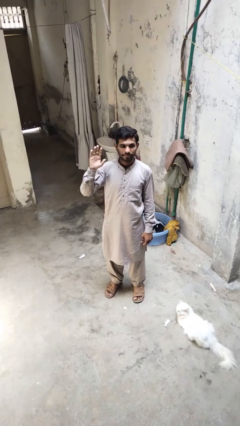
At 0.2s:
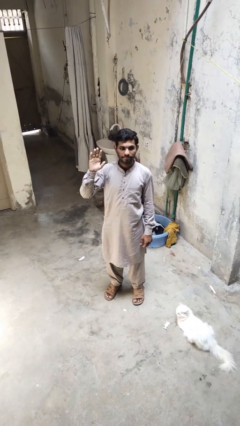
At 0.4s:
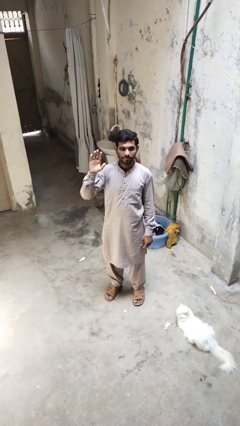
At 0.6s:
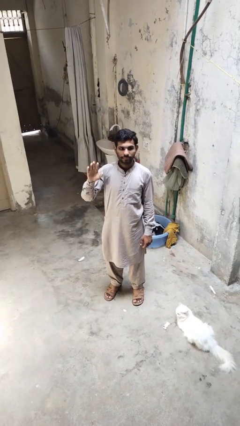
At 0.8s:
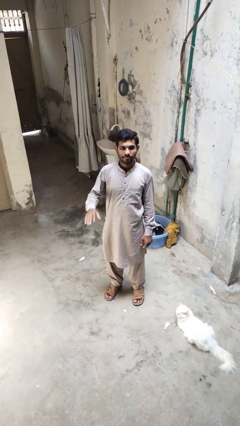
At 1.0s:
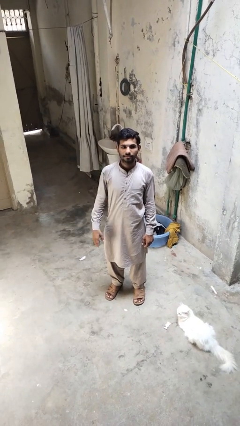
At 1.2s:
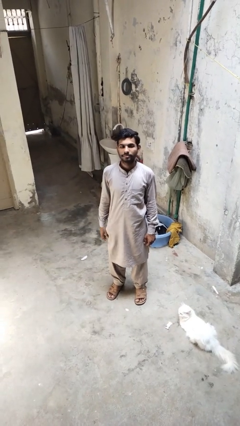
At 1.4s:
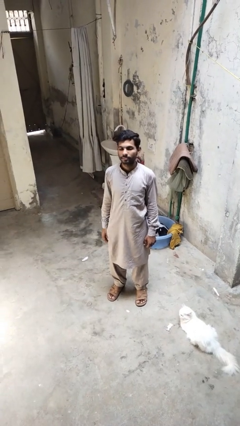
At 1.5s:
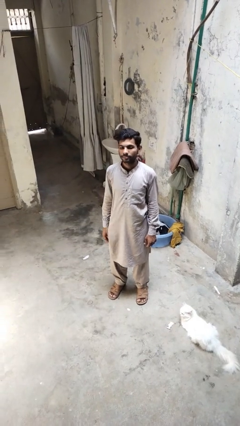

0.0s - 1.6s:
person gestures lower hand

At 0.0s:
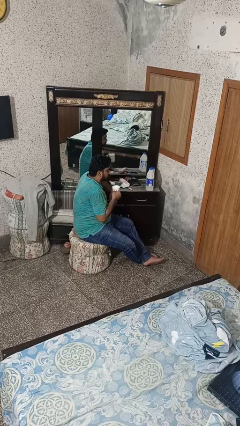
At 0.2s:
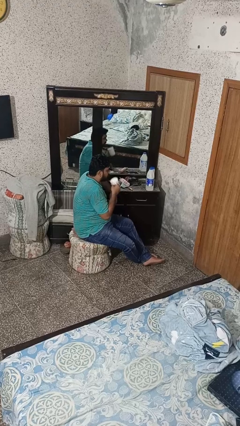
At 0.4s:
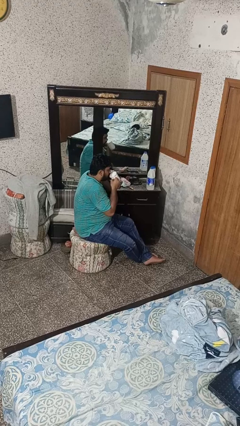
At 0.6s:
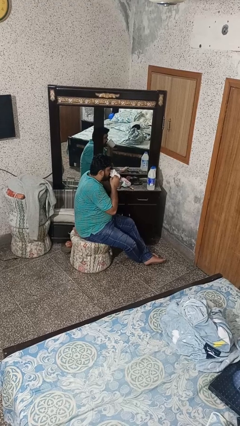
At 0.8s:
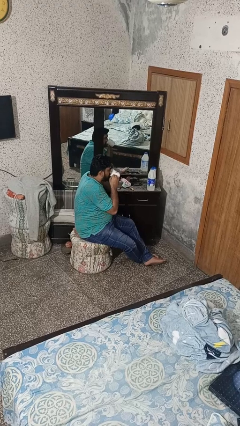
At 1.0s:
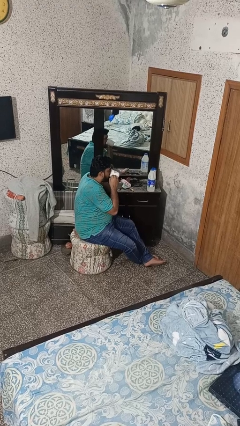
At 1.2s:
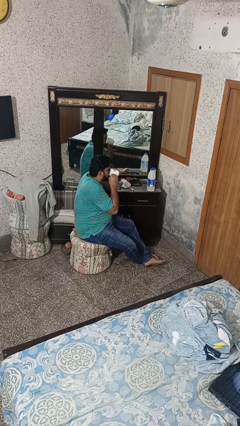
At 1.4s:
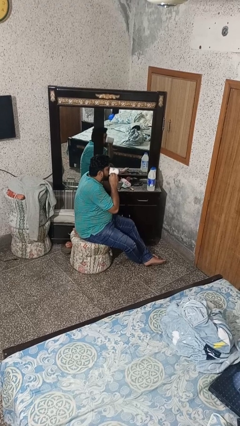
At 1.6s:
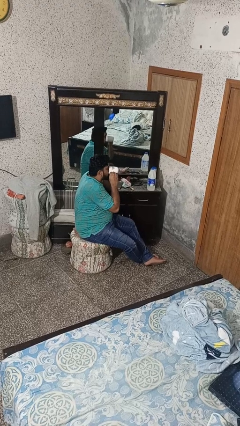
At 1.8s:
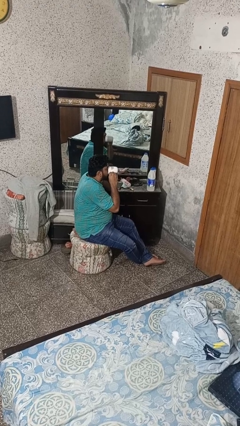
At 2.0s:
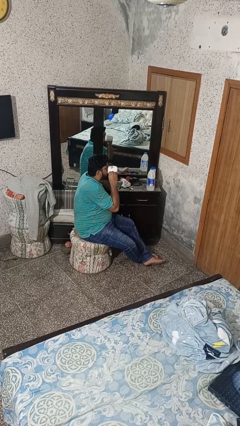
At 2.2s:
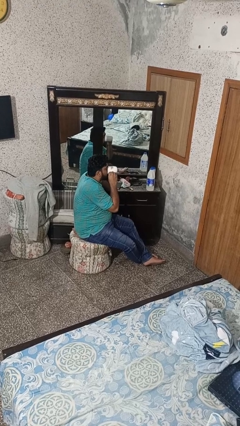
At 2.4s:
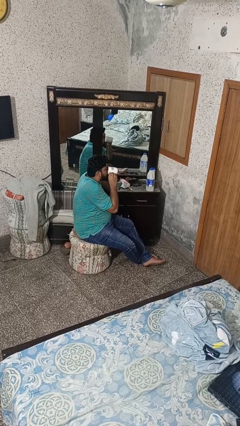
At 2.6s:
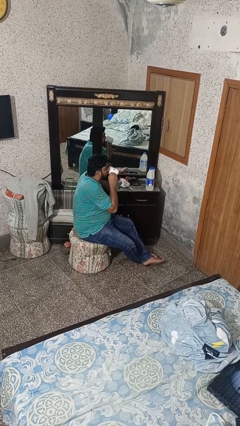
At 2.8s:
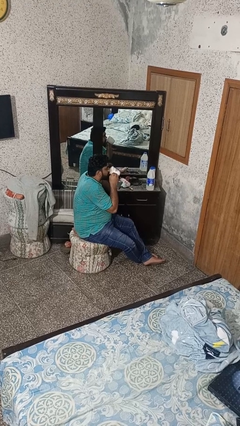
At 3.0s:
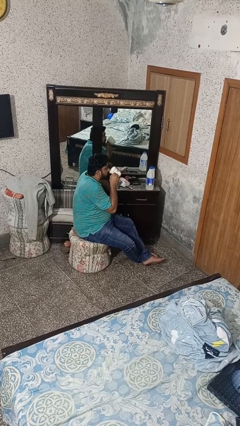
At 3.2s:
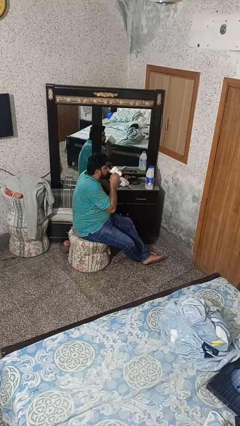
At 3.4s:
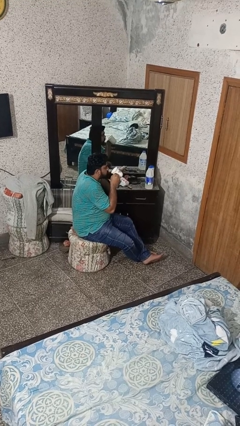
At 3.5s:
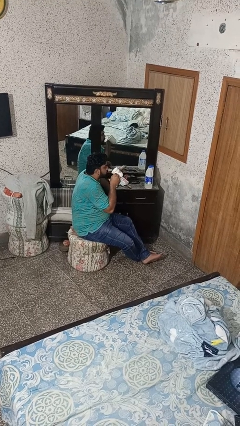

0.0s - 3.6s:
person drinks from mug

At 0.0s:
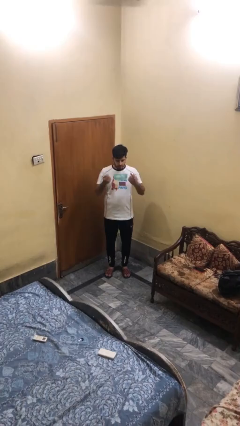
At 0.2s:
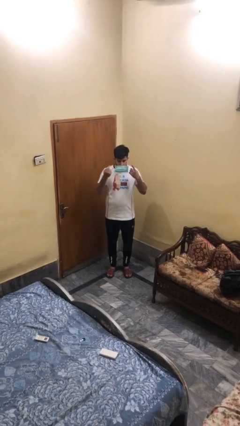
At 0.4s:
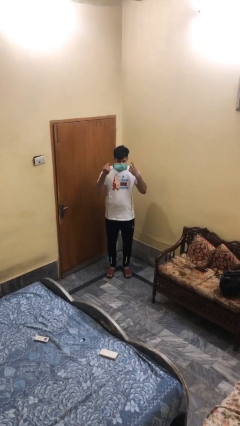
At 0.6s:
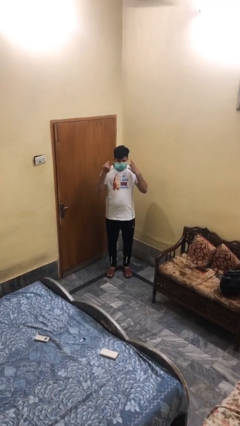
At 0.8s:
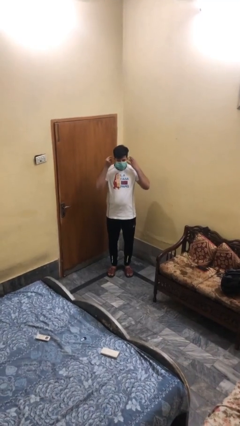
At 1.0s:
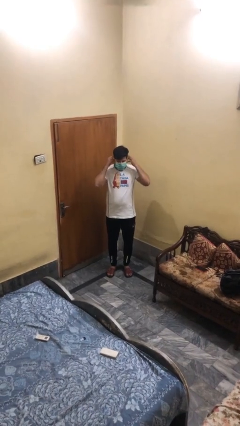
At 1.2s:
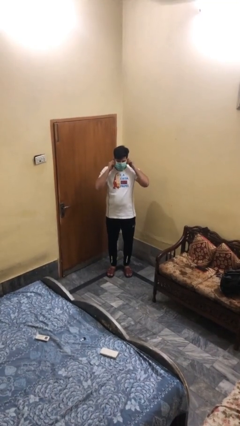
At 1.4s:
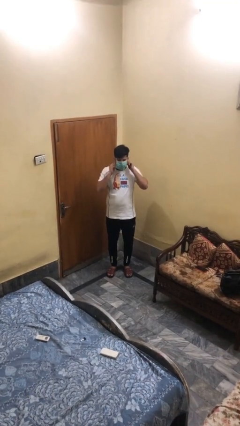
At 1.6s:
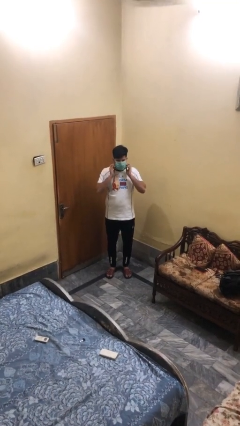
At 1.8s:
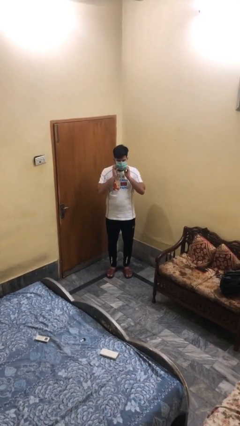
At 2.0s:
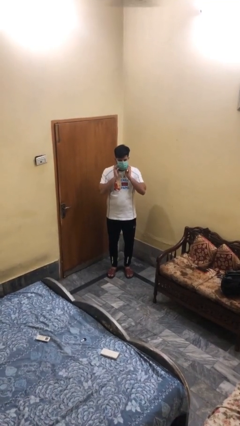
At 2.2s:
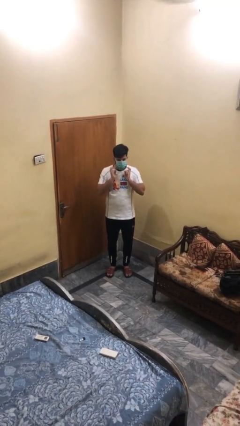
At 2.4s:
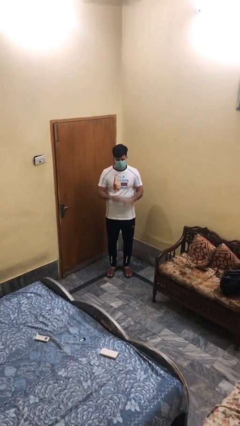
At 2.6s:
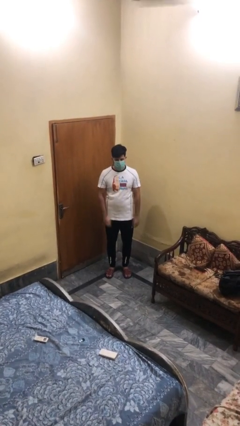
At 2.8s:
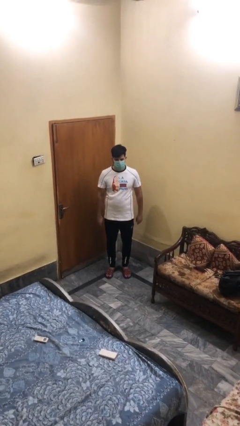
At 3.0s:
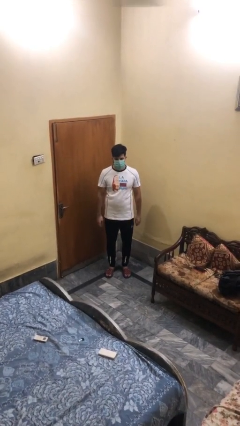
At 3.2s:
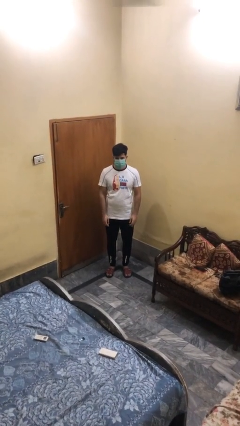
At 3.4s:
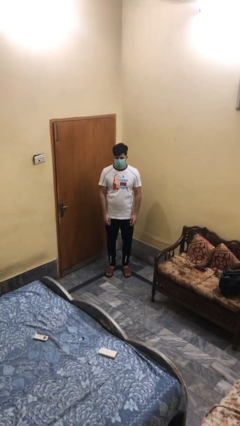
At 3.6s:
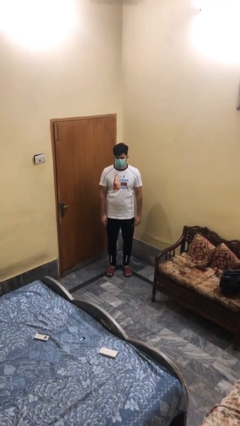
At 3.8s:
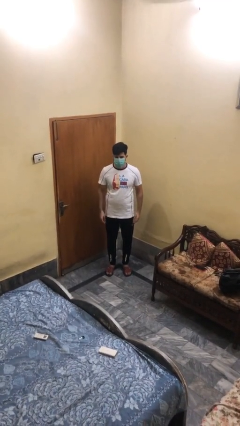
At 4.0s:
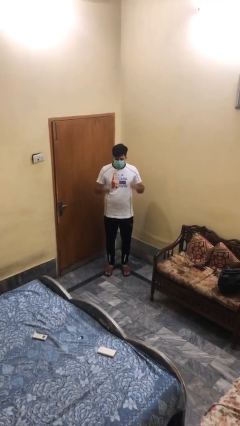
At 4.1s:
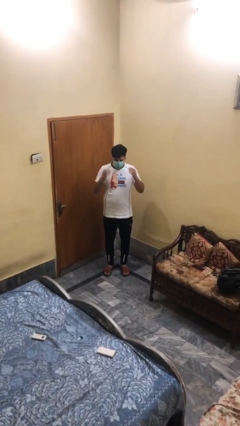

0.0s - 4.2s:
person puts on facemask

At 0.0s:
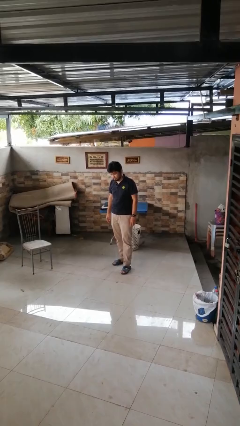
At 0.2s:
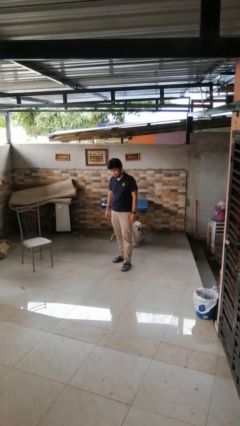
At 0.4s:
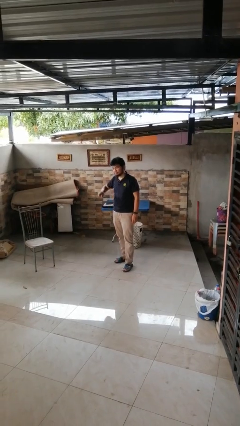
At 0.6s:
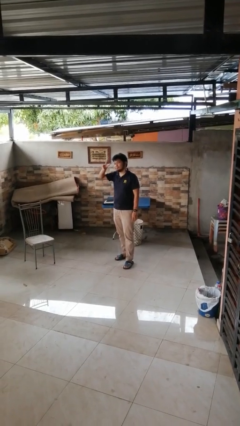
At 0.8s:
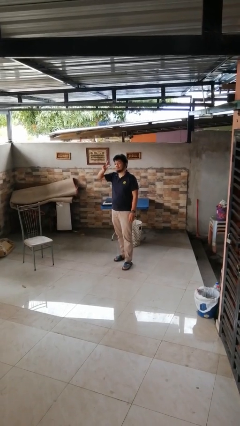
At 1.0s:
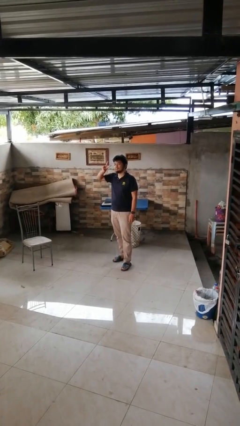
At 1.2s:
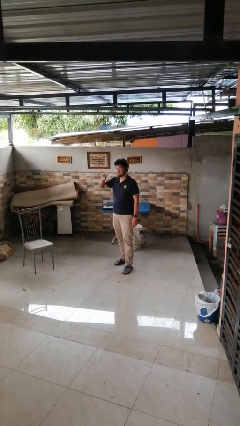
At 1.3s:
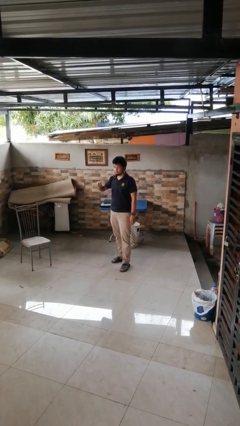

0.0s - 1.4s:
person gestures peace

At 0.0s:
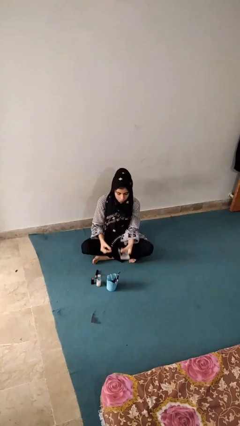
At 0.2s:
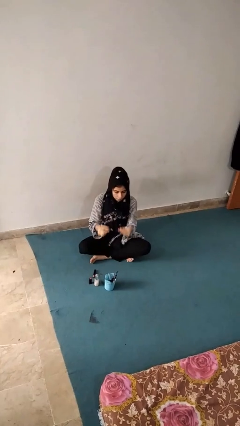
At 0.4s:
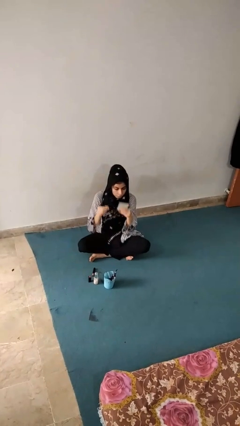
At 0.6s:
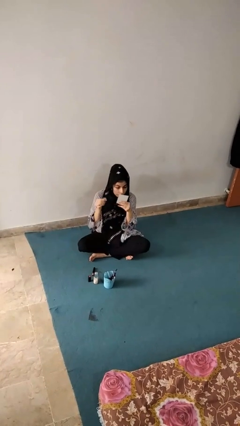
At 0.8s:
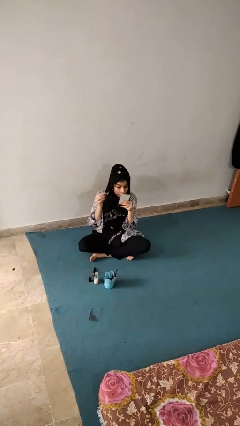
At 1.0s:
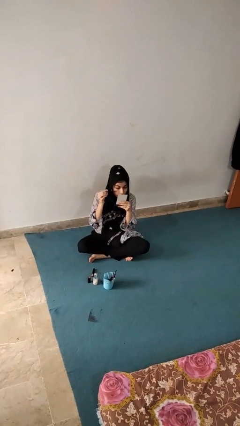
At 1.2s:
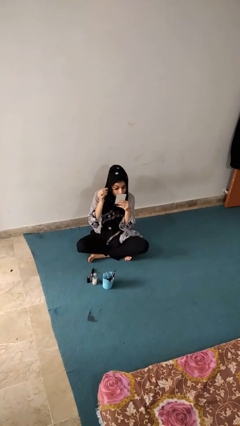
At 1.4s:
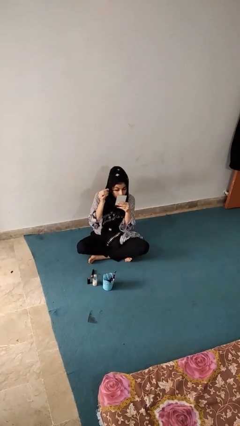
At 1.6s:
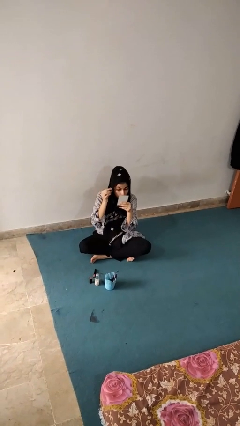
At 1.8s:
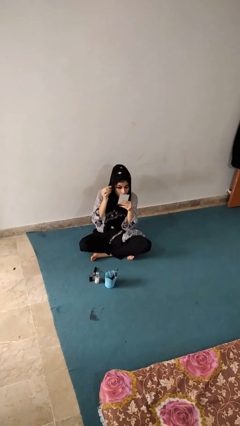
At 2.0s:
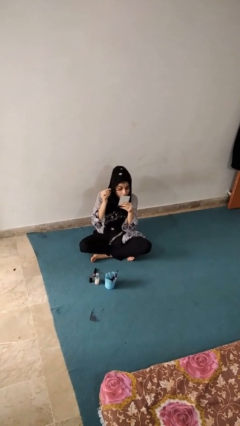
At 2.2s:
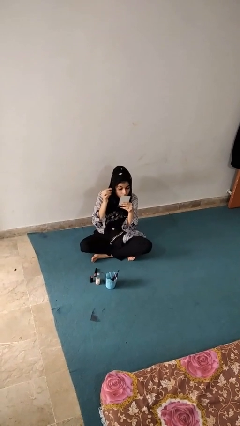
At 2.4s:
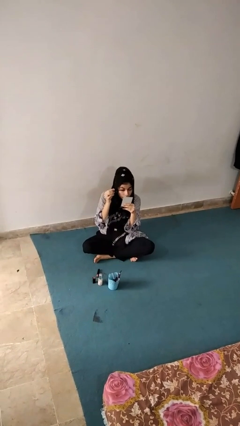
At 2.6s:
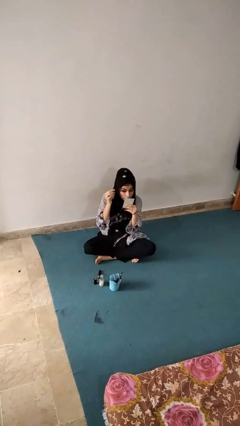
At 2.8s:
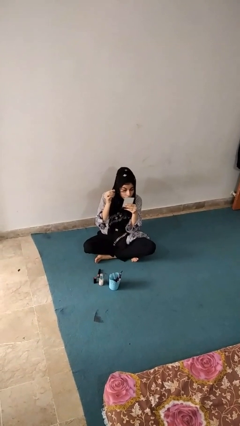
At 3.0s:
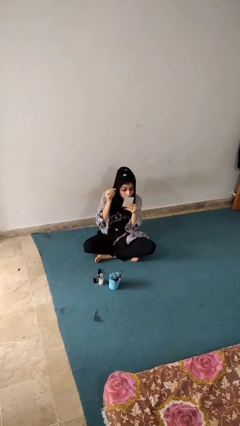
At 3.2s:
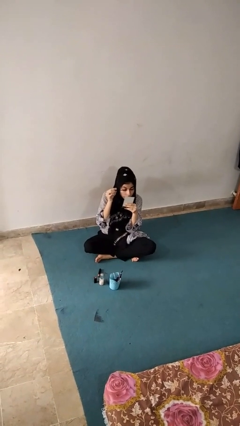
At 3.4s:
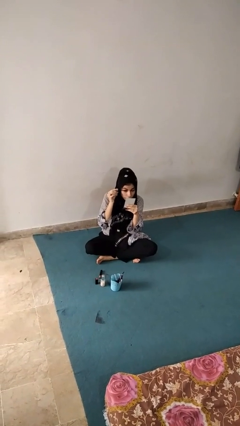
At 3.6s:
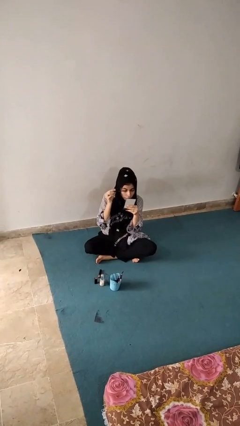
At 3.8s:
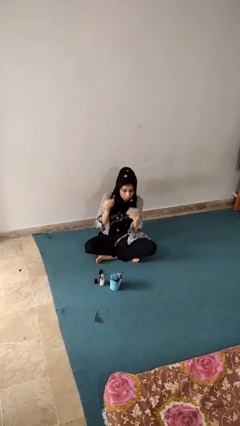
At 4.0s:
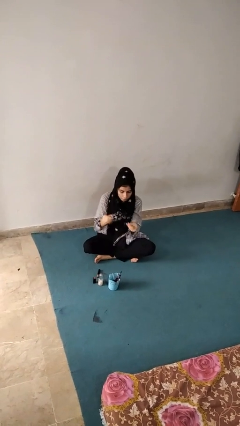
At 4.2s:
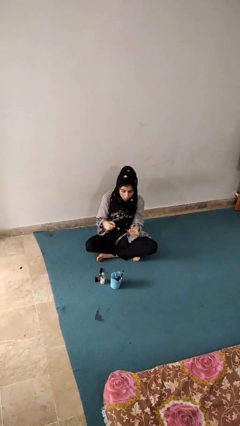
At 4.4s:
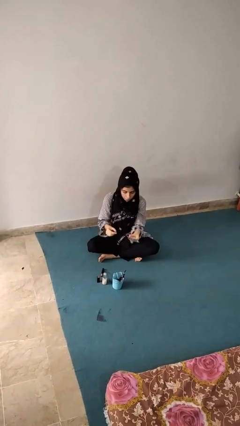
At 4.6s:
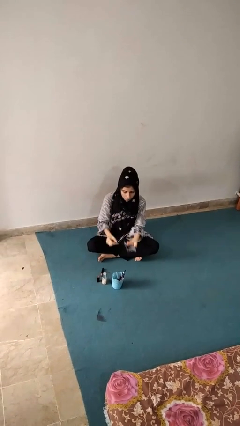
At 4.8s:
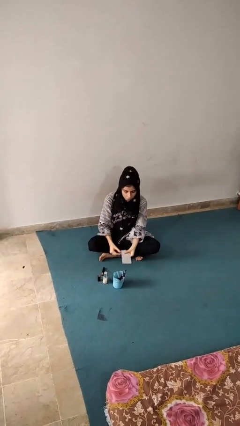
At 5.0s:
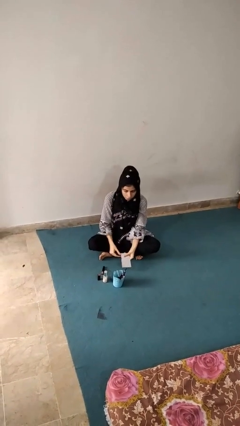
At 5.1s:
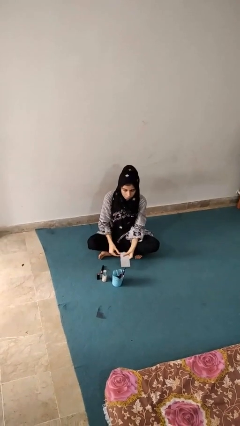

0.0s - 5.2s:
person applies eye makeup

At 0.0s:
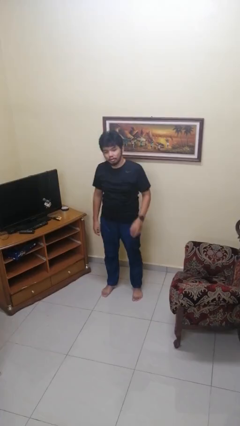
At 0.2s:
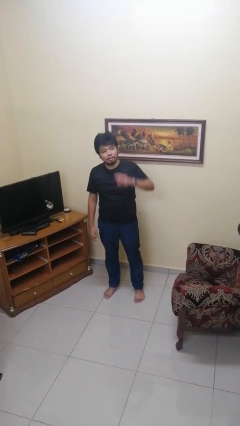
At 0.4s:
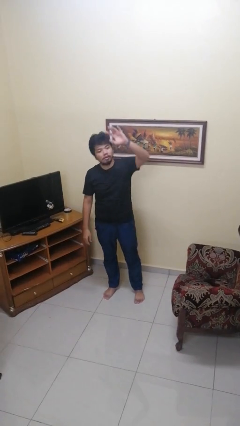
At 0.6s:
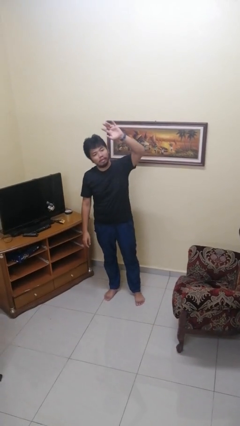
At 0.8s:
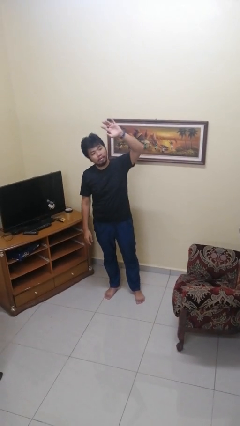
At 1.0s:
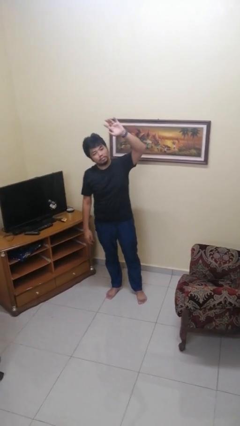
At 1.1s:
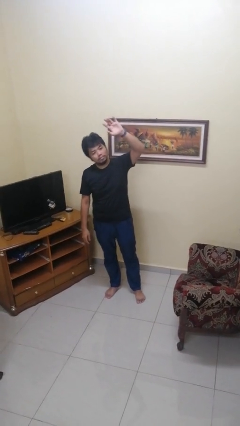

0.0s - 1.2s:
person gestures raise hand

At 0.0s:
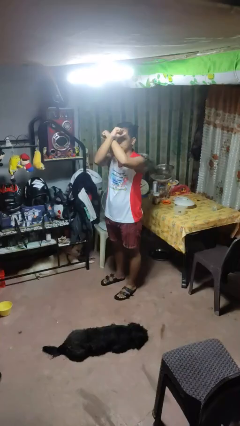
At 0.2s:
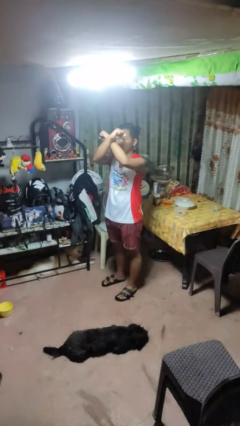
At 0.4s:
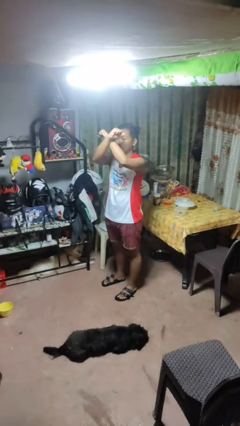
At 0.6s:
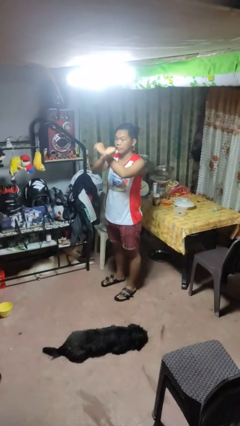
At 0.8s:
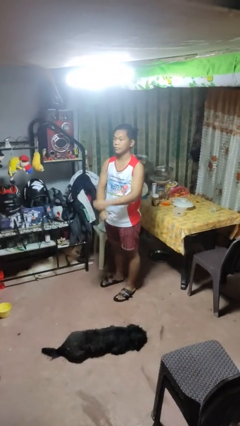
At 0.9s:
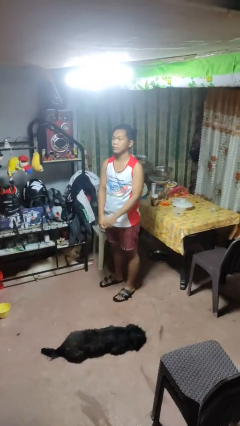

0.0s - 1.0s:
person gestures arms x
